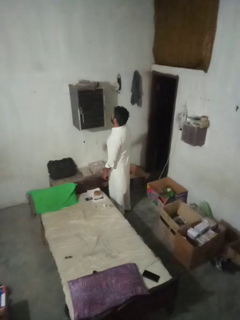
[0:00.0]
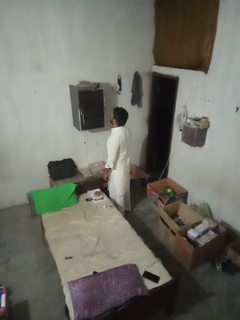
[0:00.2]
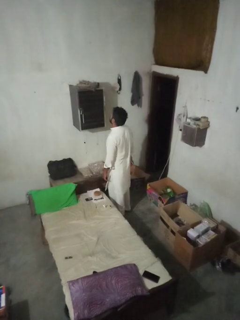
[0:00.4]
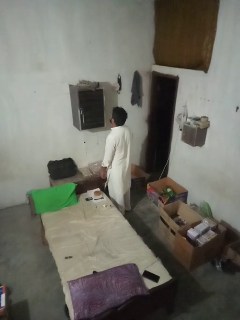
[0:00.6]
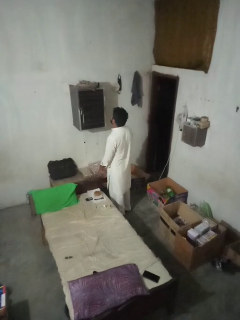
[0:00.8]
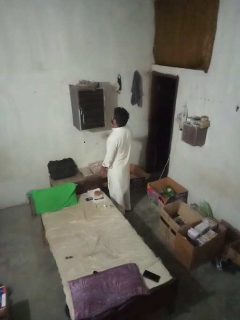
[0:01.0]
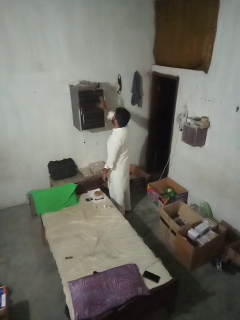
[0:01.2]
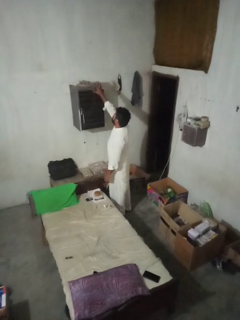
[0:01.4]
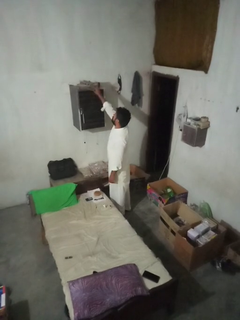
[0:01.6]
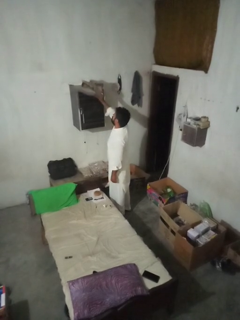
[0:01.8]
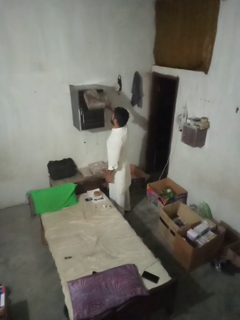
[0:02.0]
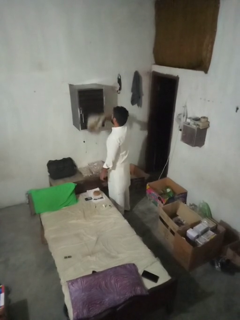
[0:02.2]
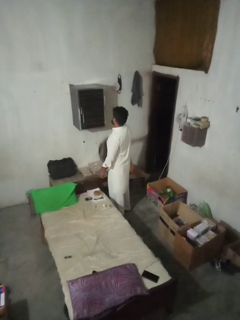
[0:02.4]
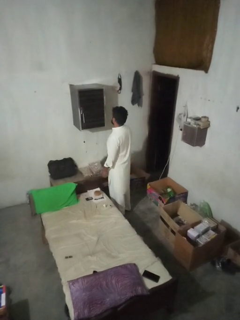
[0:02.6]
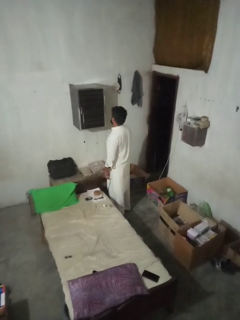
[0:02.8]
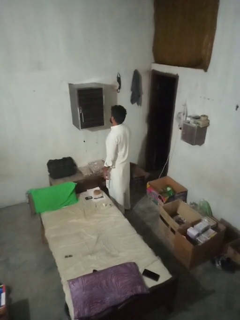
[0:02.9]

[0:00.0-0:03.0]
person picks up object from shelf

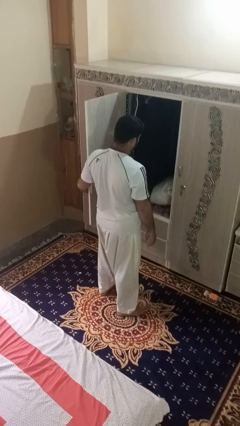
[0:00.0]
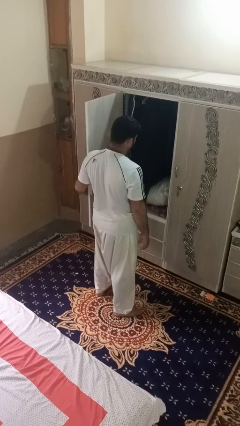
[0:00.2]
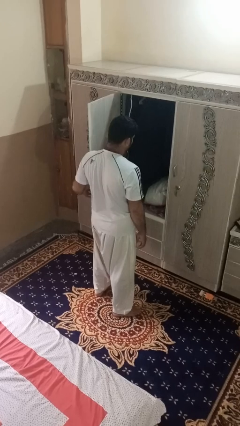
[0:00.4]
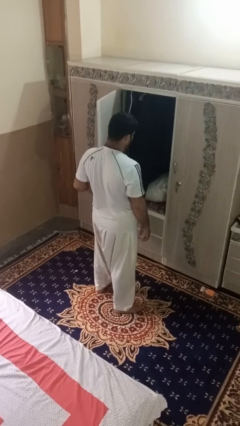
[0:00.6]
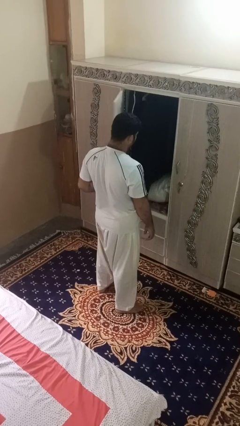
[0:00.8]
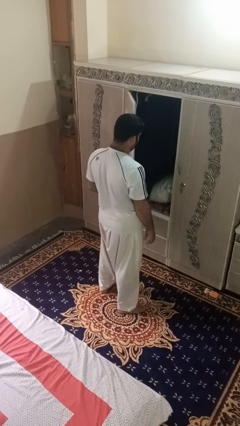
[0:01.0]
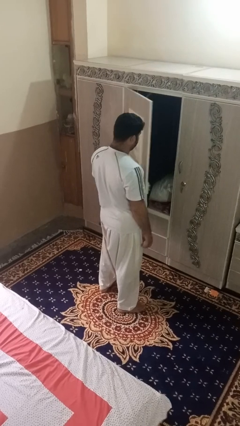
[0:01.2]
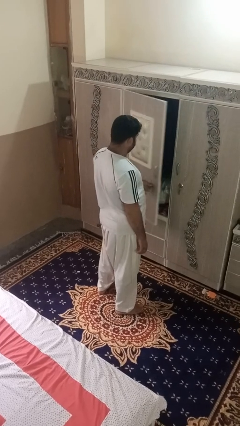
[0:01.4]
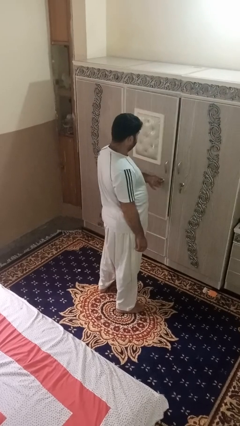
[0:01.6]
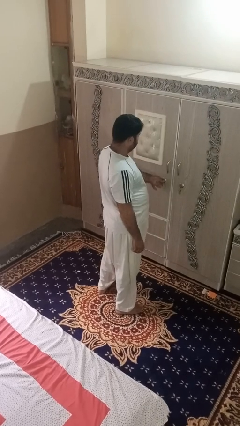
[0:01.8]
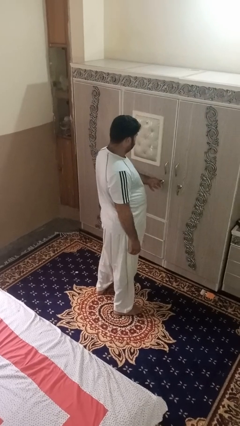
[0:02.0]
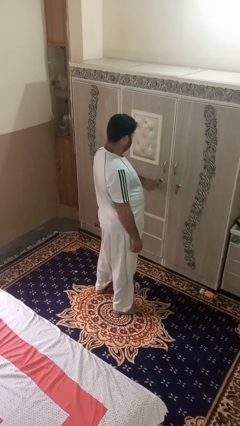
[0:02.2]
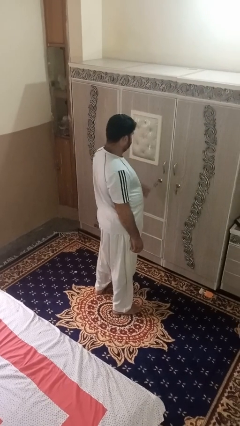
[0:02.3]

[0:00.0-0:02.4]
person closes dresser drawer

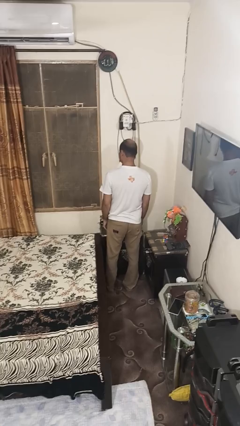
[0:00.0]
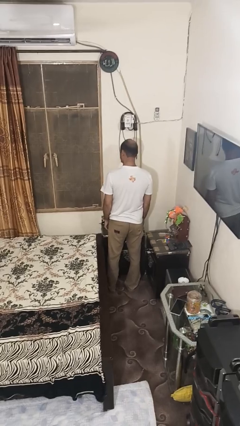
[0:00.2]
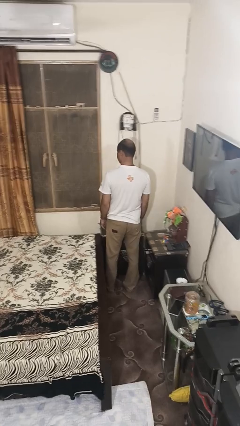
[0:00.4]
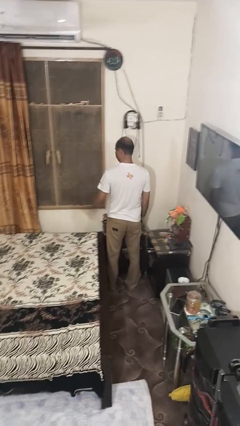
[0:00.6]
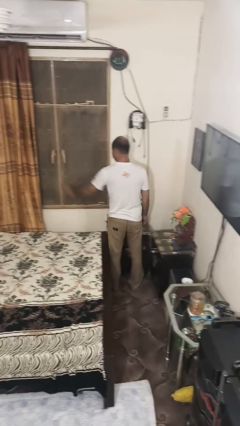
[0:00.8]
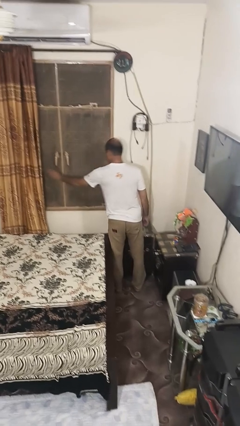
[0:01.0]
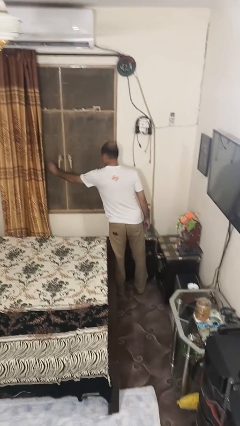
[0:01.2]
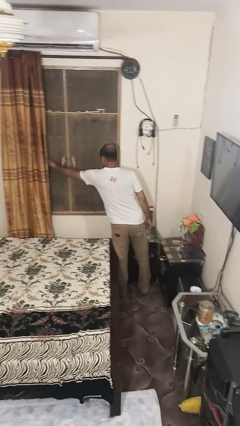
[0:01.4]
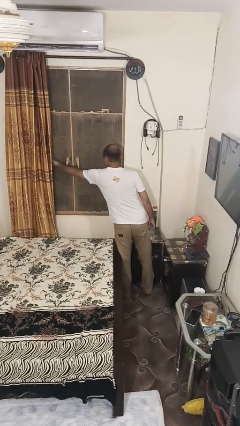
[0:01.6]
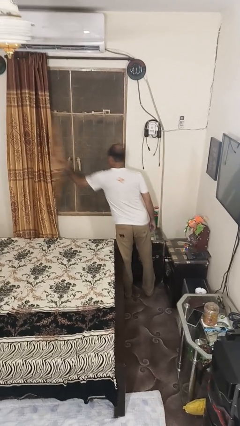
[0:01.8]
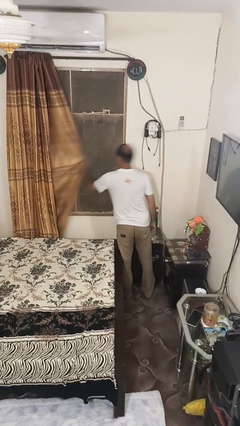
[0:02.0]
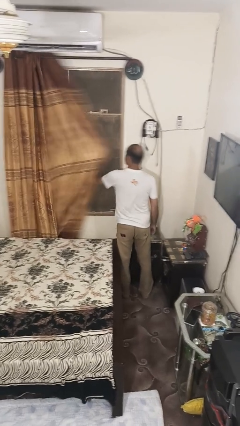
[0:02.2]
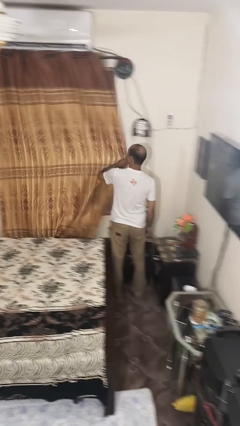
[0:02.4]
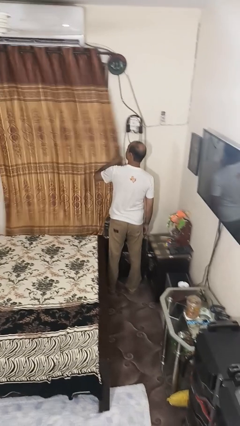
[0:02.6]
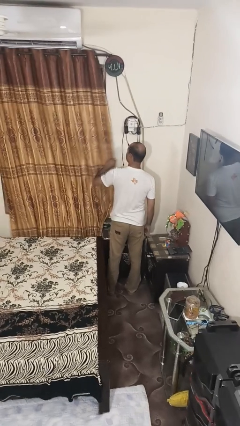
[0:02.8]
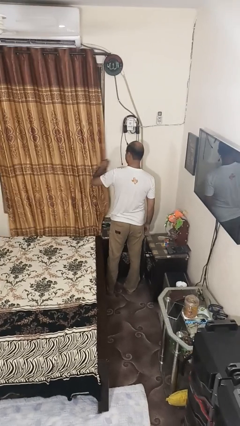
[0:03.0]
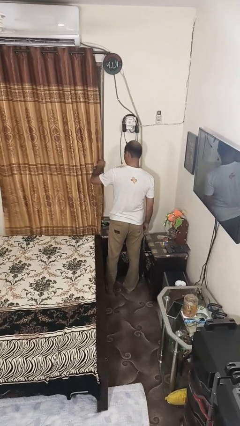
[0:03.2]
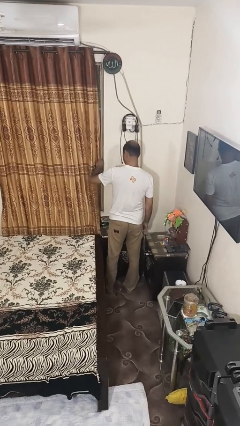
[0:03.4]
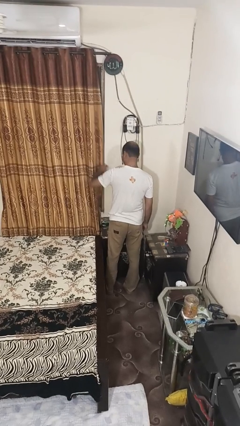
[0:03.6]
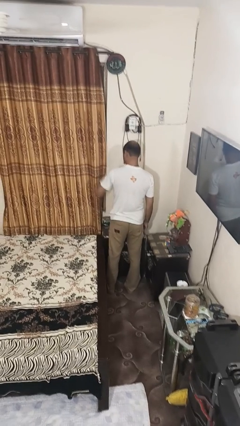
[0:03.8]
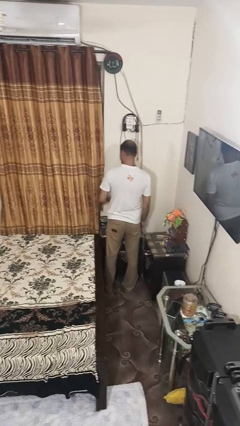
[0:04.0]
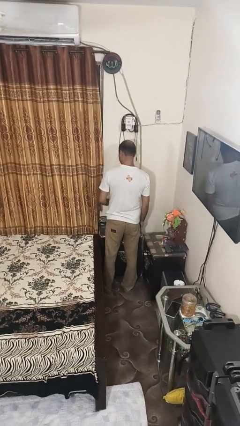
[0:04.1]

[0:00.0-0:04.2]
person closes curtains

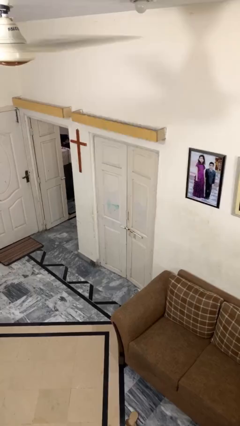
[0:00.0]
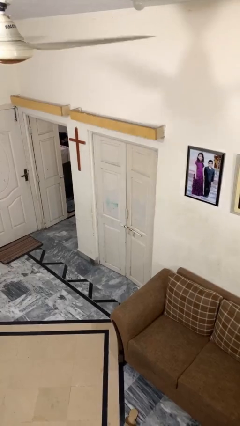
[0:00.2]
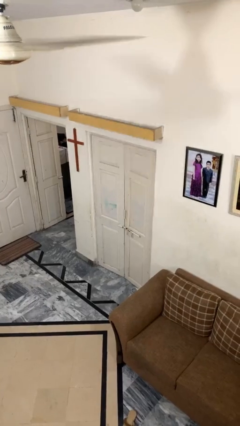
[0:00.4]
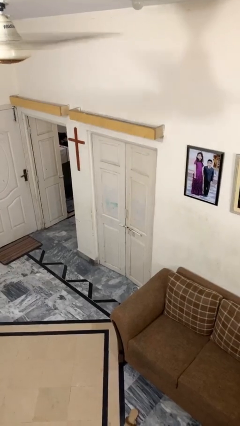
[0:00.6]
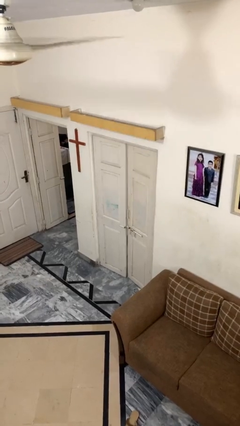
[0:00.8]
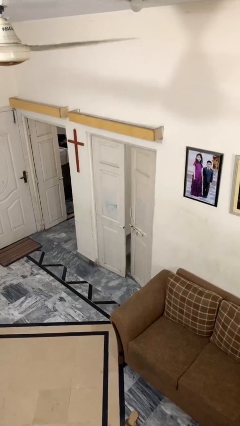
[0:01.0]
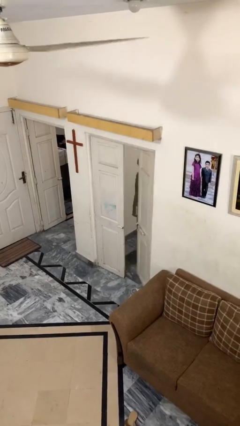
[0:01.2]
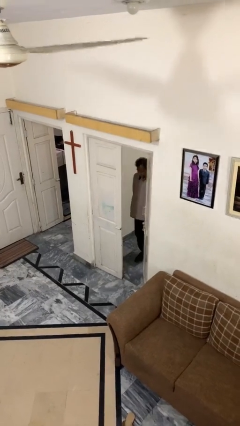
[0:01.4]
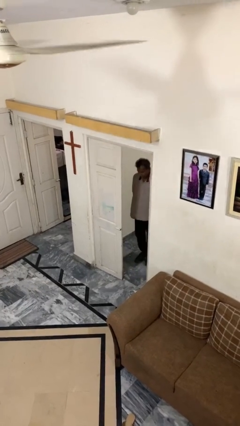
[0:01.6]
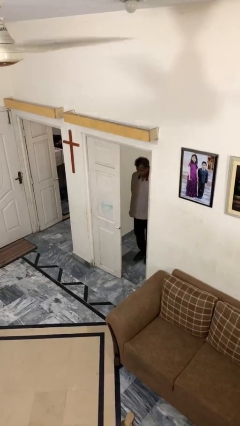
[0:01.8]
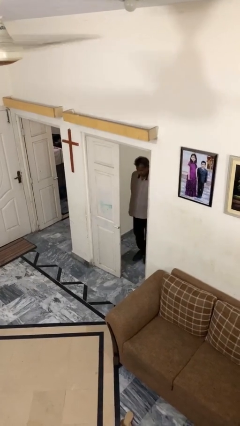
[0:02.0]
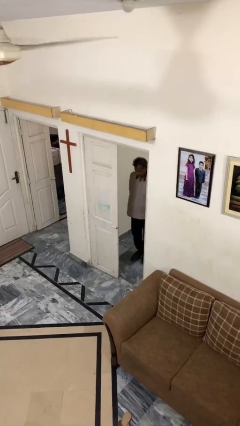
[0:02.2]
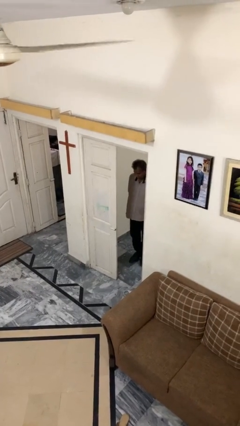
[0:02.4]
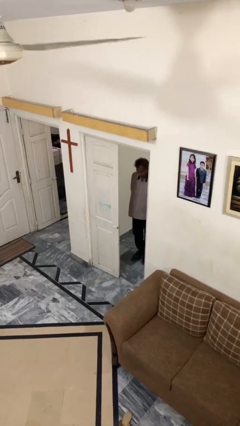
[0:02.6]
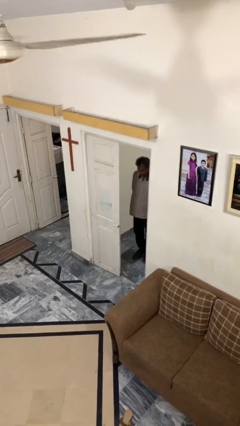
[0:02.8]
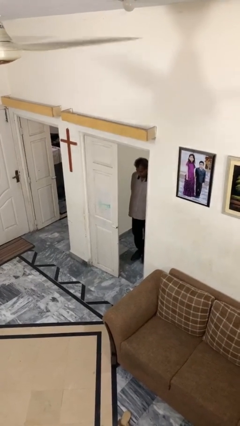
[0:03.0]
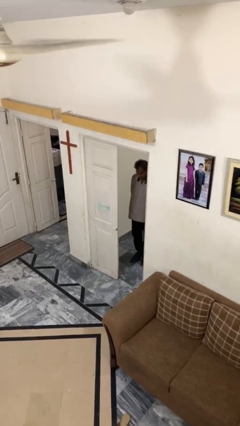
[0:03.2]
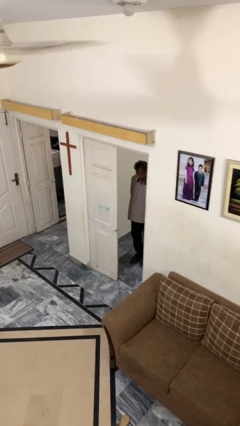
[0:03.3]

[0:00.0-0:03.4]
person opens facility door

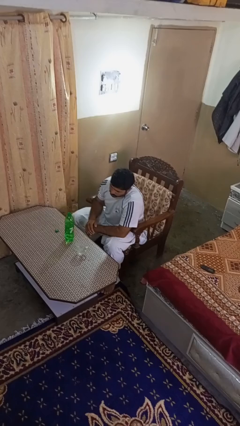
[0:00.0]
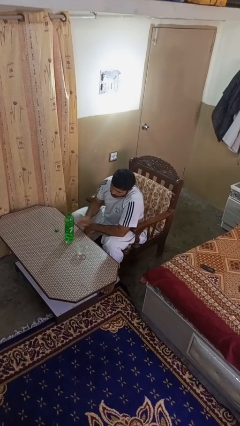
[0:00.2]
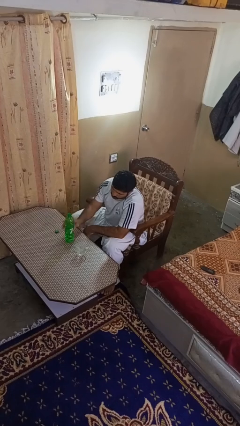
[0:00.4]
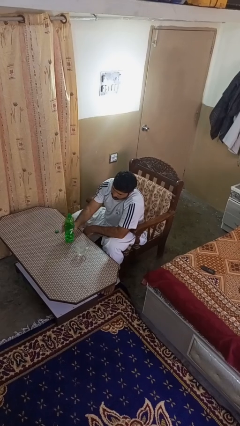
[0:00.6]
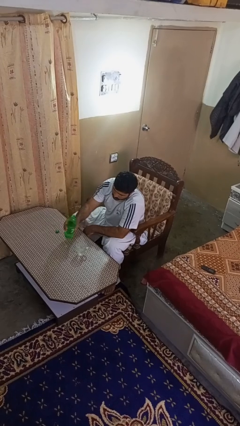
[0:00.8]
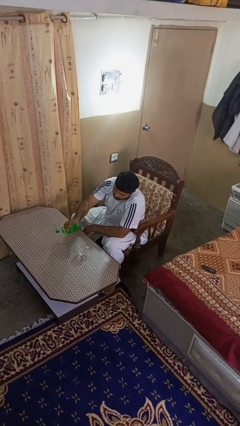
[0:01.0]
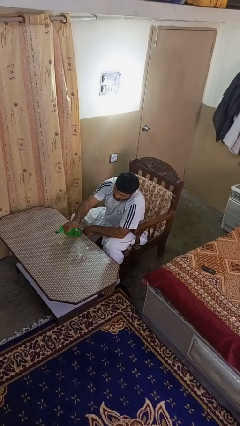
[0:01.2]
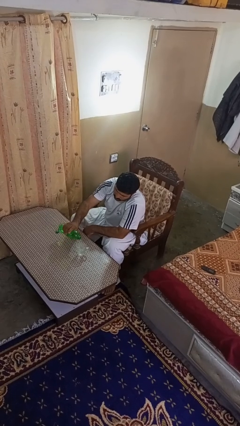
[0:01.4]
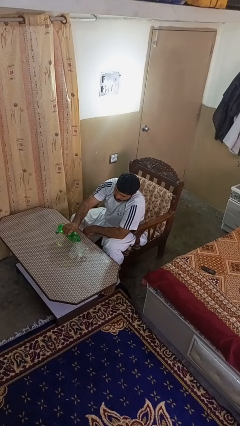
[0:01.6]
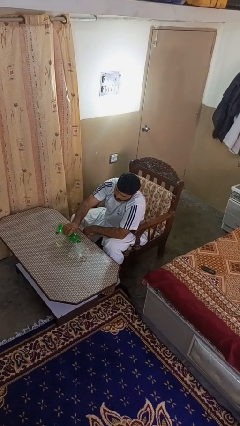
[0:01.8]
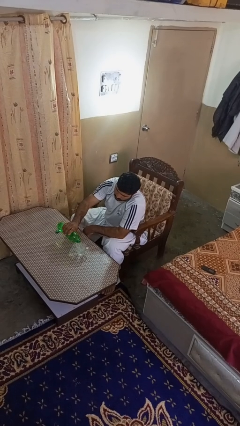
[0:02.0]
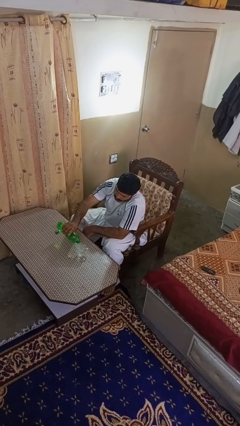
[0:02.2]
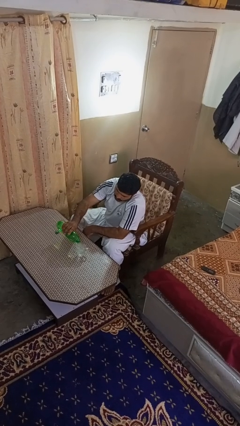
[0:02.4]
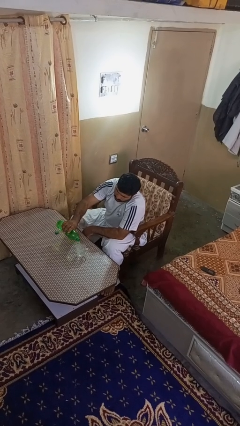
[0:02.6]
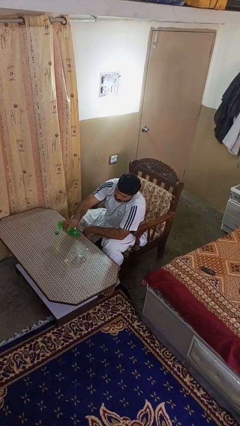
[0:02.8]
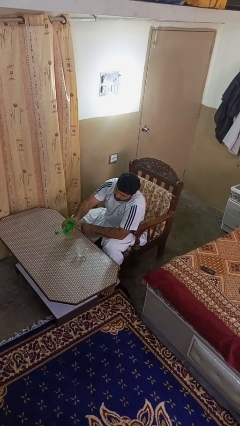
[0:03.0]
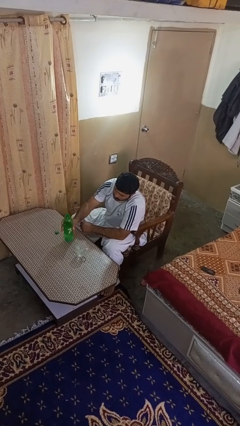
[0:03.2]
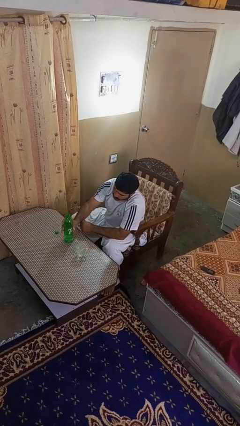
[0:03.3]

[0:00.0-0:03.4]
person pours liquid into cup

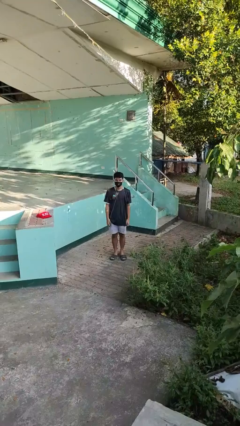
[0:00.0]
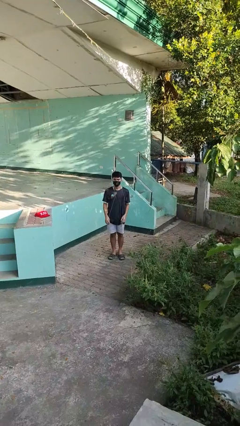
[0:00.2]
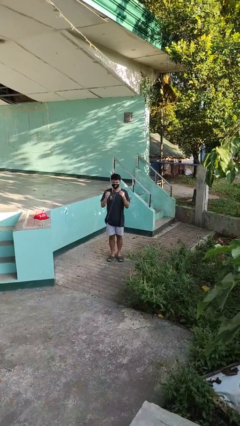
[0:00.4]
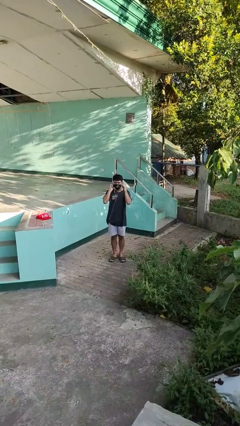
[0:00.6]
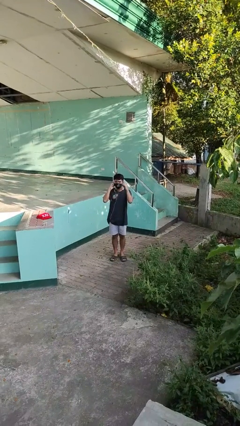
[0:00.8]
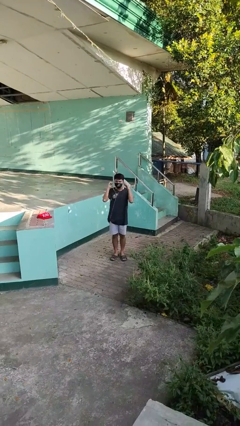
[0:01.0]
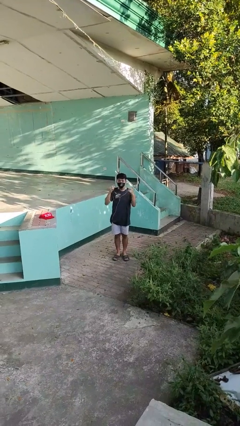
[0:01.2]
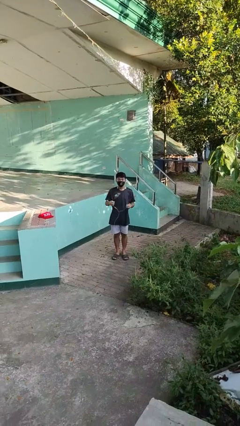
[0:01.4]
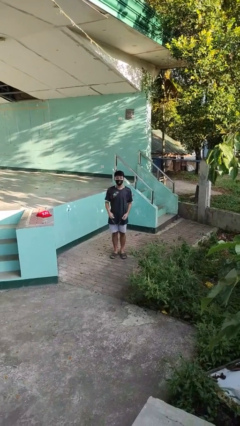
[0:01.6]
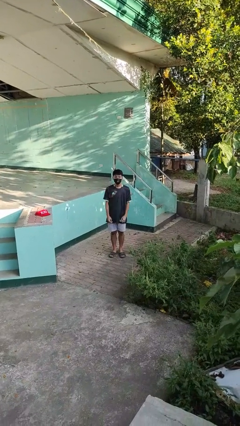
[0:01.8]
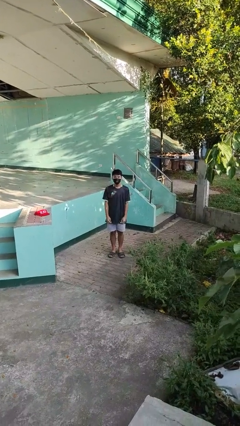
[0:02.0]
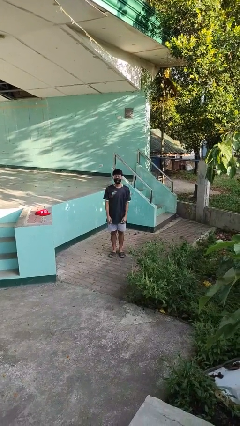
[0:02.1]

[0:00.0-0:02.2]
person takes off headphones
